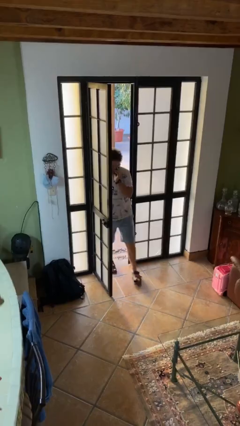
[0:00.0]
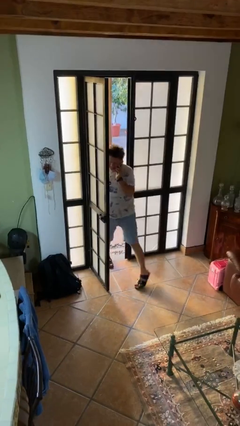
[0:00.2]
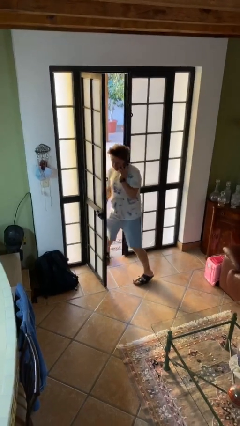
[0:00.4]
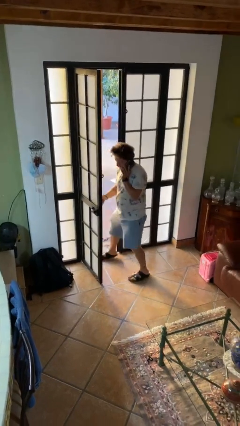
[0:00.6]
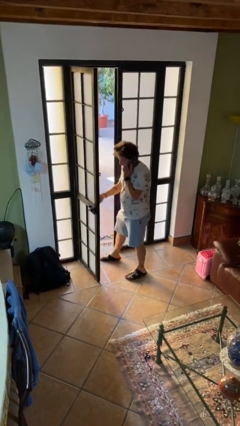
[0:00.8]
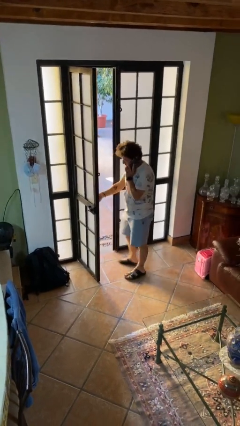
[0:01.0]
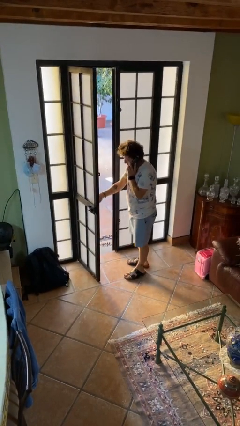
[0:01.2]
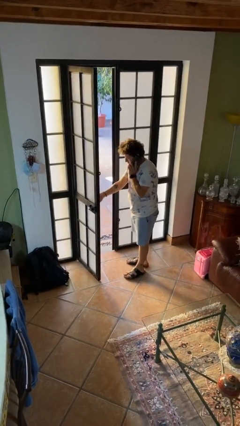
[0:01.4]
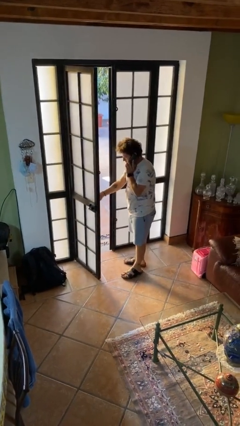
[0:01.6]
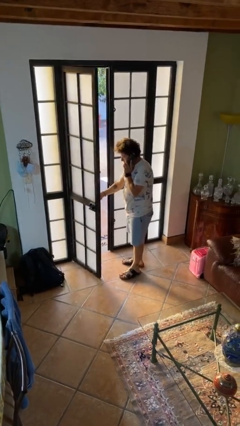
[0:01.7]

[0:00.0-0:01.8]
person enters scene through structure

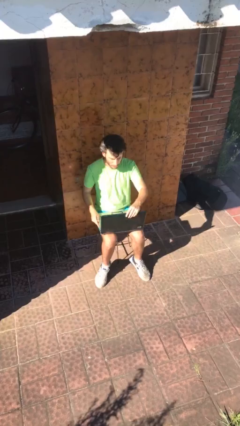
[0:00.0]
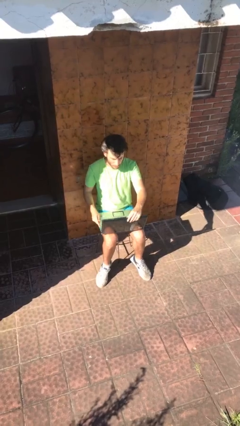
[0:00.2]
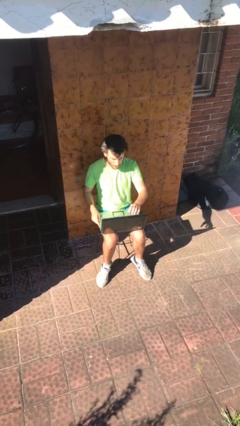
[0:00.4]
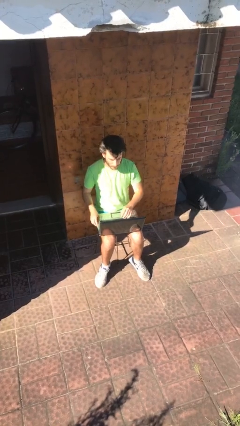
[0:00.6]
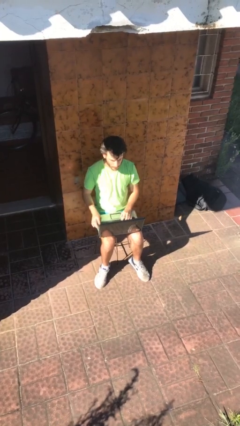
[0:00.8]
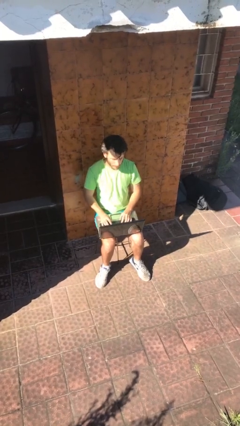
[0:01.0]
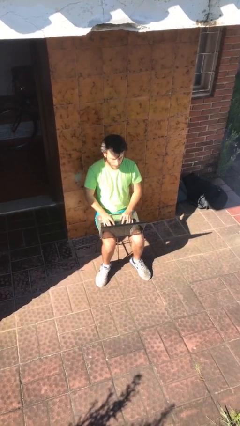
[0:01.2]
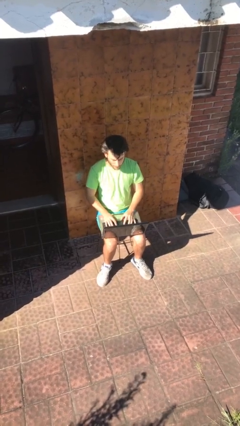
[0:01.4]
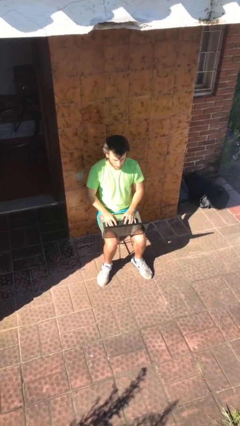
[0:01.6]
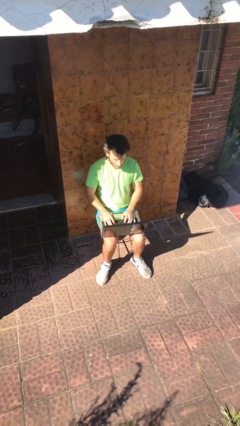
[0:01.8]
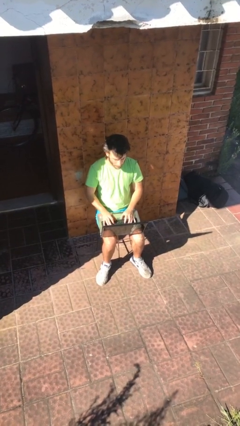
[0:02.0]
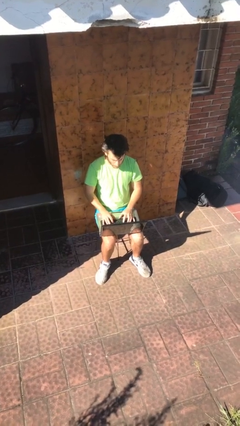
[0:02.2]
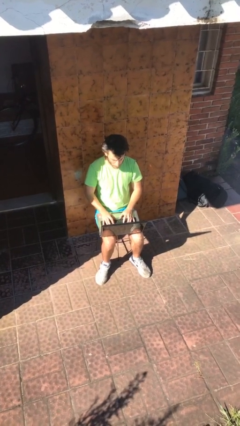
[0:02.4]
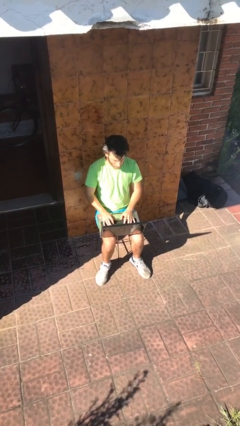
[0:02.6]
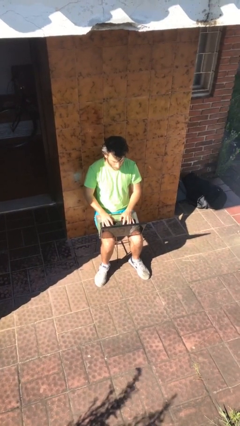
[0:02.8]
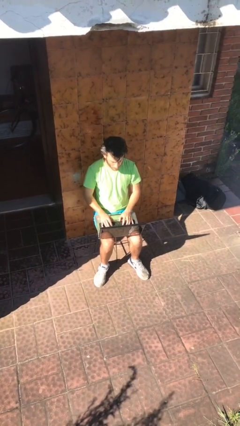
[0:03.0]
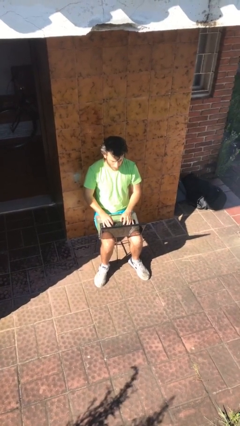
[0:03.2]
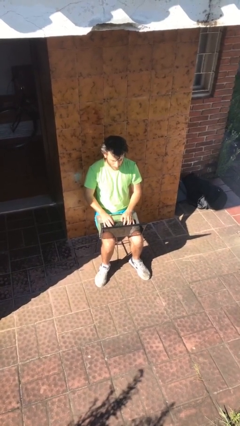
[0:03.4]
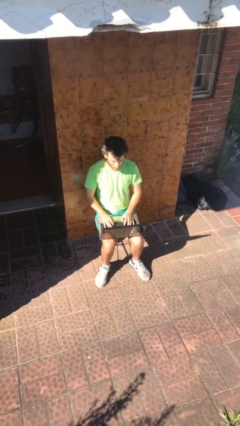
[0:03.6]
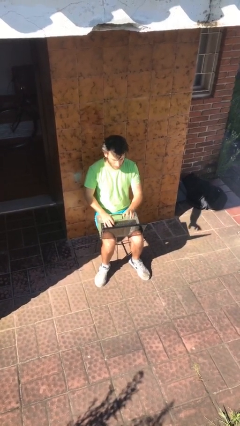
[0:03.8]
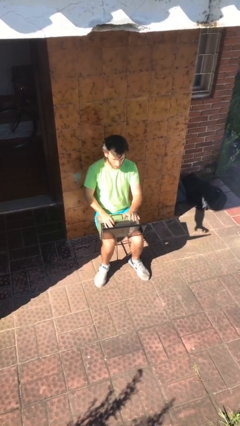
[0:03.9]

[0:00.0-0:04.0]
person interacts with laptop

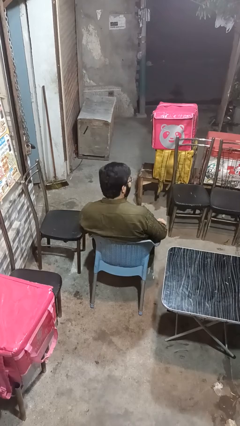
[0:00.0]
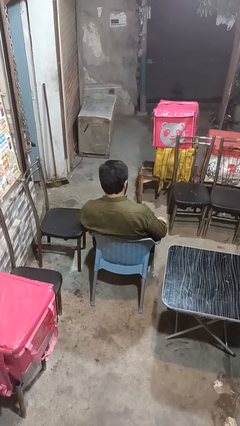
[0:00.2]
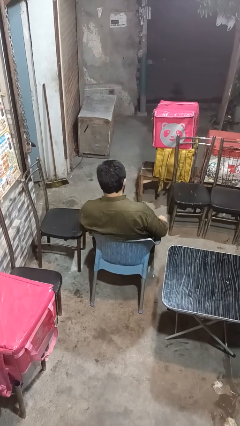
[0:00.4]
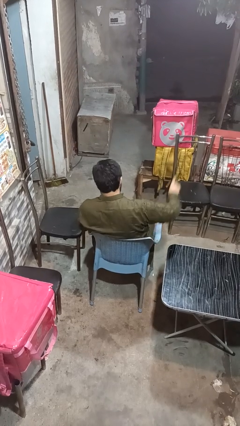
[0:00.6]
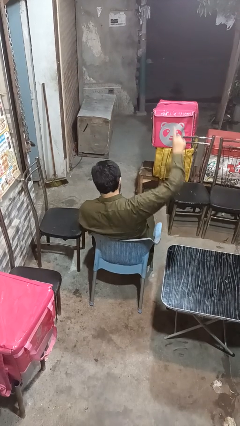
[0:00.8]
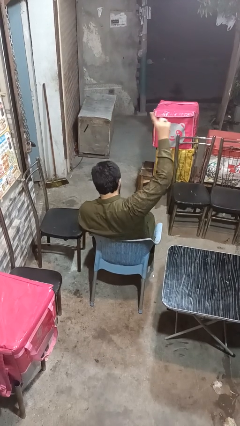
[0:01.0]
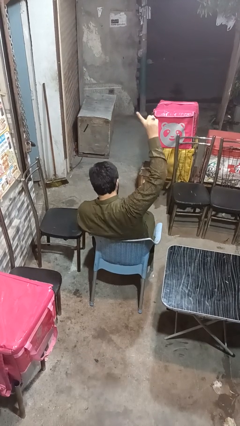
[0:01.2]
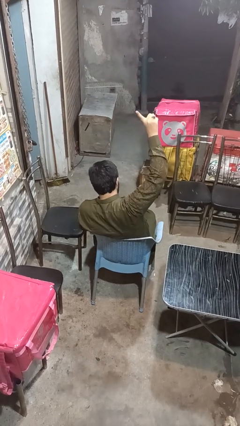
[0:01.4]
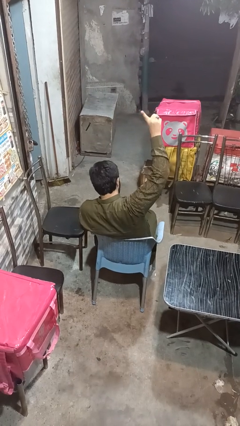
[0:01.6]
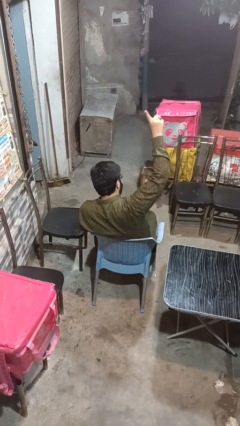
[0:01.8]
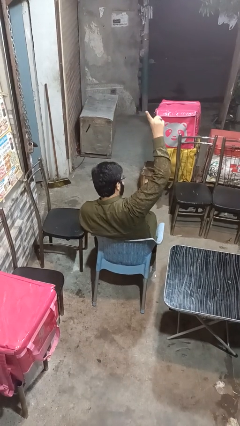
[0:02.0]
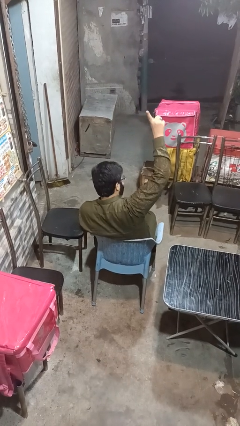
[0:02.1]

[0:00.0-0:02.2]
person gestures number one

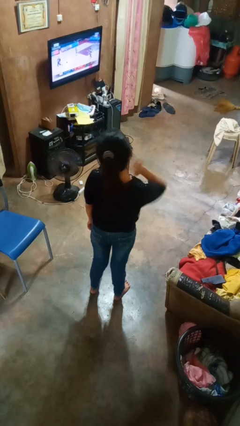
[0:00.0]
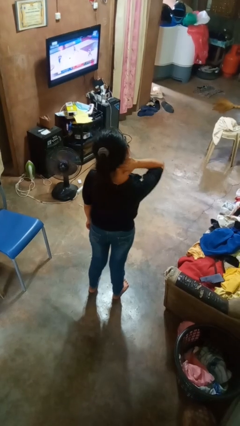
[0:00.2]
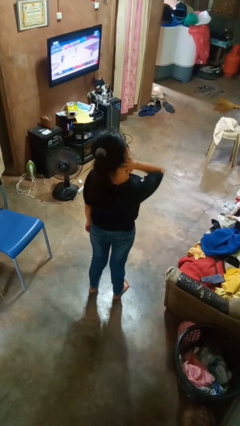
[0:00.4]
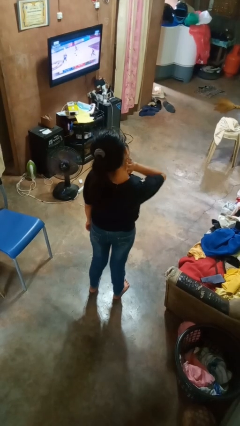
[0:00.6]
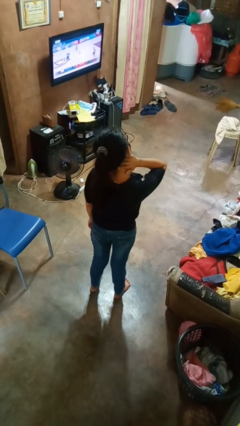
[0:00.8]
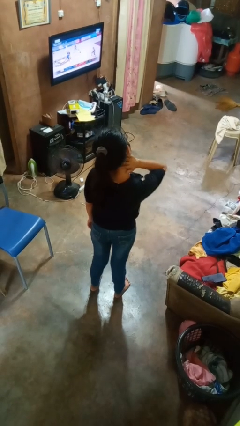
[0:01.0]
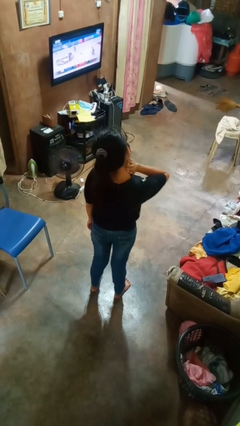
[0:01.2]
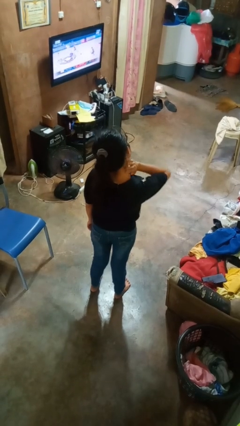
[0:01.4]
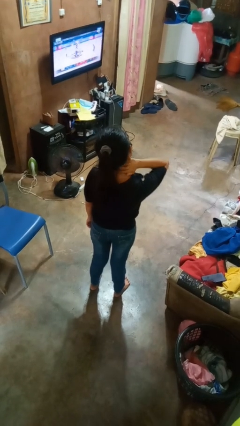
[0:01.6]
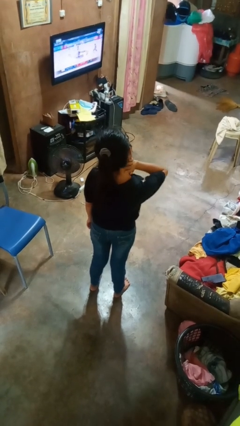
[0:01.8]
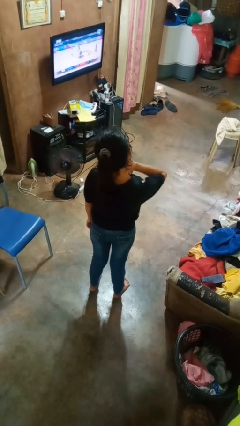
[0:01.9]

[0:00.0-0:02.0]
person rubs neck

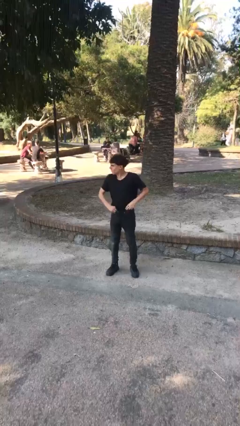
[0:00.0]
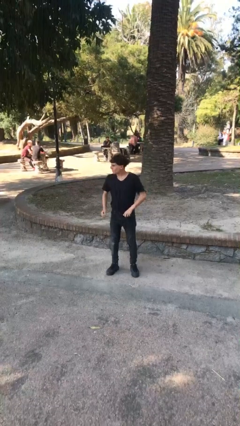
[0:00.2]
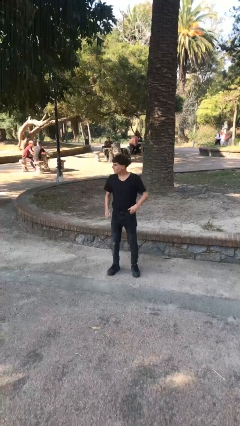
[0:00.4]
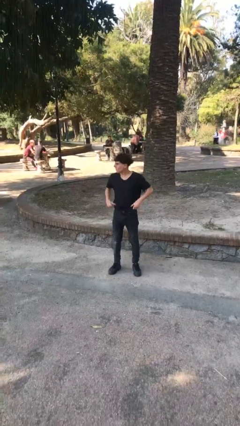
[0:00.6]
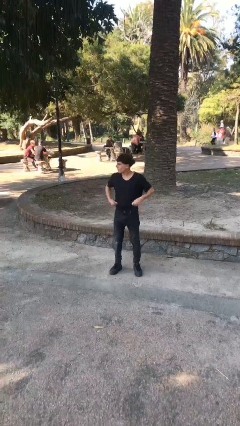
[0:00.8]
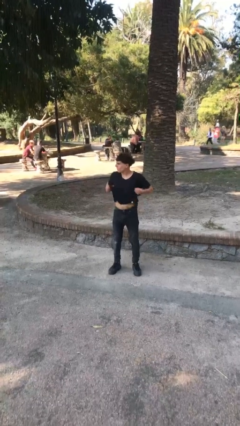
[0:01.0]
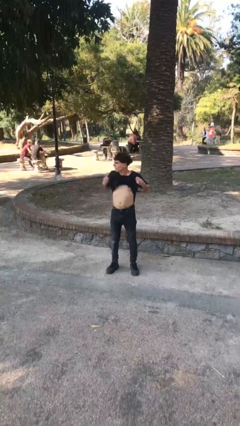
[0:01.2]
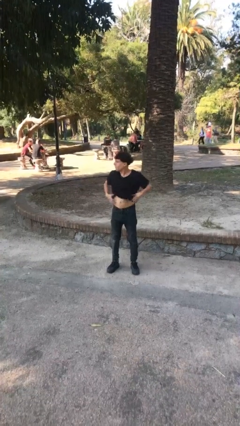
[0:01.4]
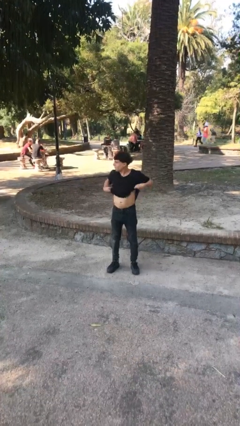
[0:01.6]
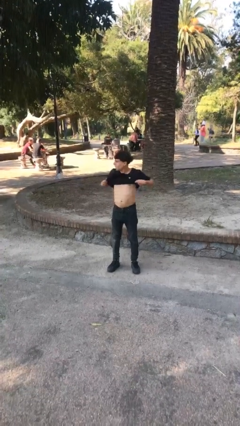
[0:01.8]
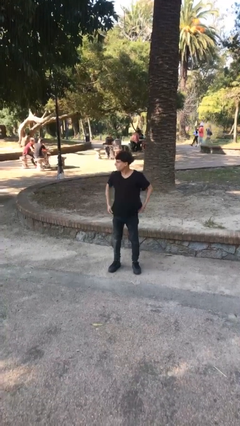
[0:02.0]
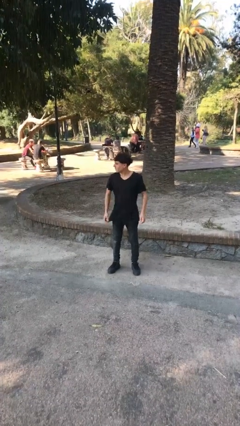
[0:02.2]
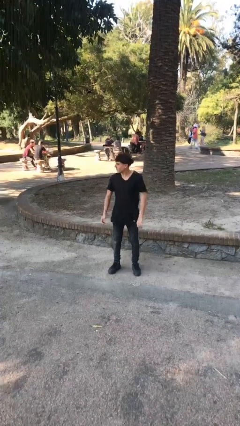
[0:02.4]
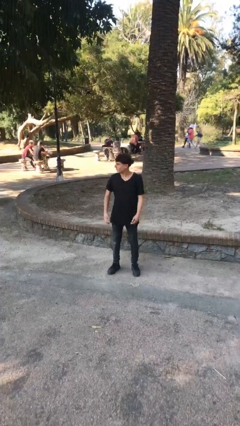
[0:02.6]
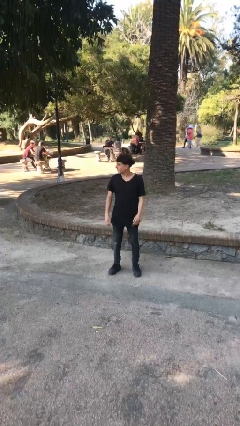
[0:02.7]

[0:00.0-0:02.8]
person untucks shirt

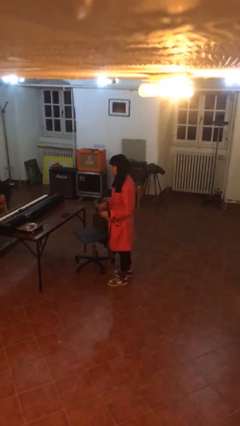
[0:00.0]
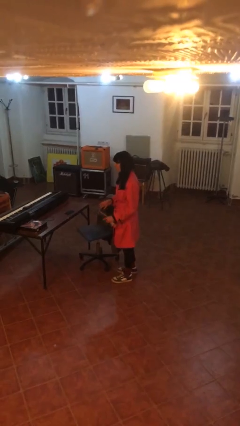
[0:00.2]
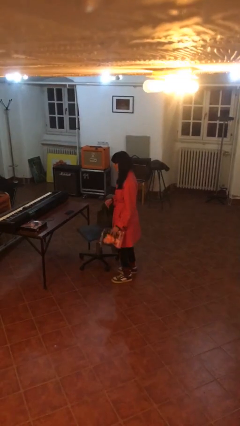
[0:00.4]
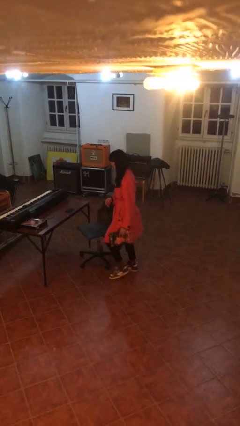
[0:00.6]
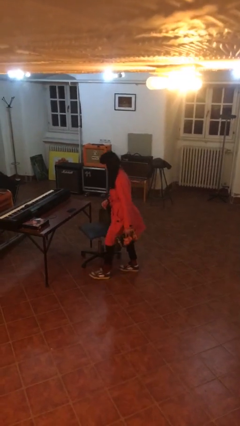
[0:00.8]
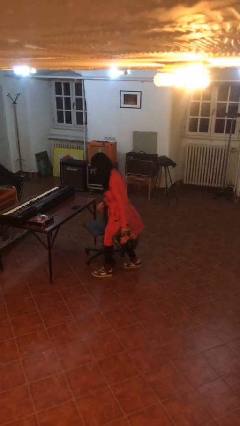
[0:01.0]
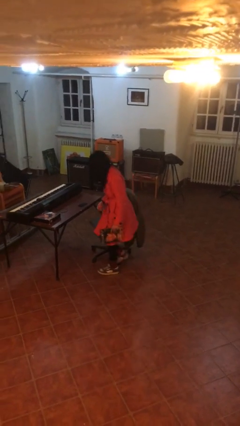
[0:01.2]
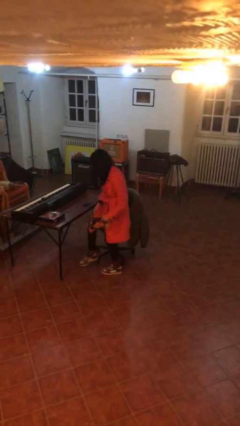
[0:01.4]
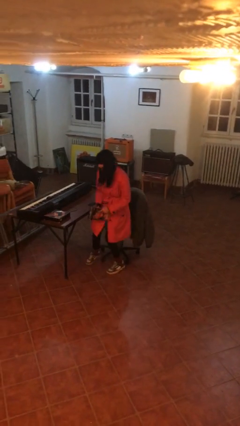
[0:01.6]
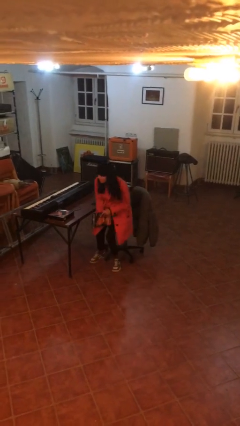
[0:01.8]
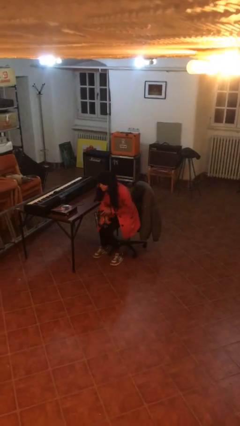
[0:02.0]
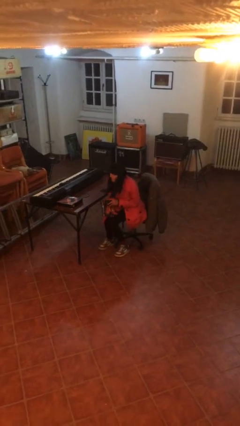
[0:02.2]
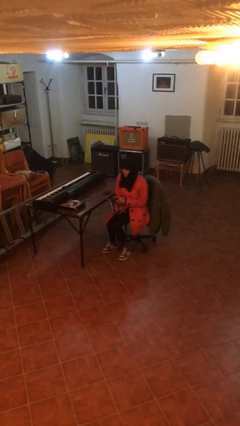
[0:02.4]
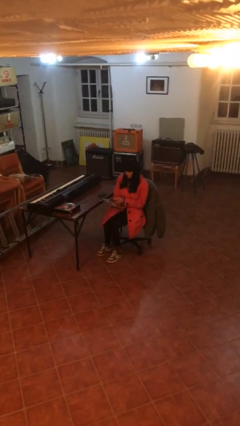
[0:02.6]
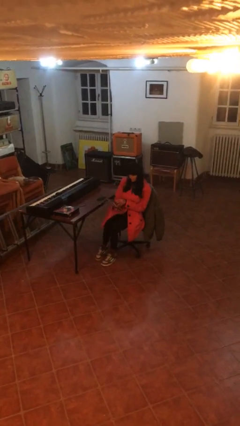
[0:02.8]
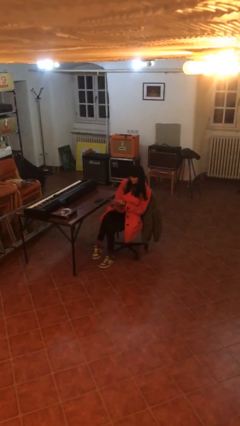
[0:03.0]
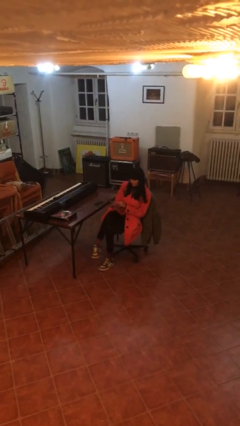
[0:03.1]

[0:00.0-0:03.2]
person sits down

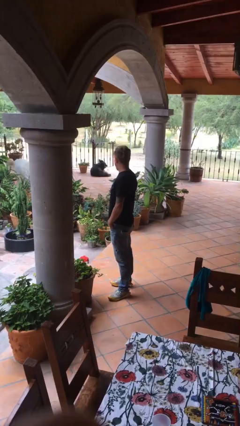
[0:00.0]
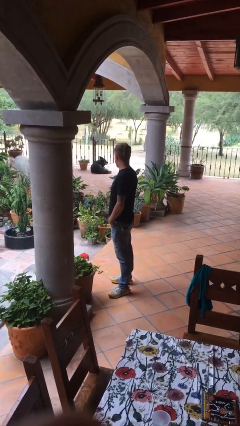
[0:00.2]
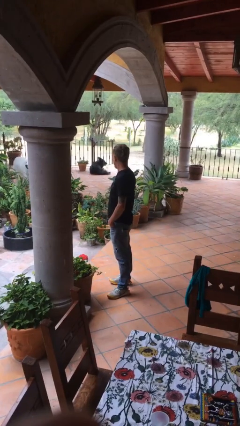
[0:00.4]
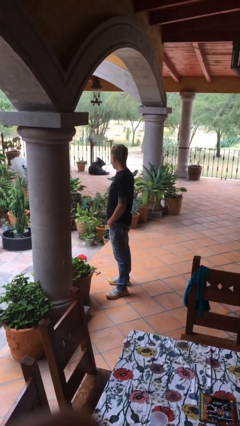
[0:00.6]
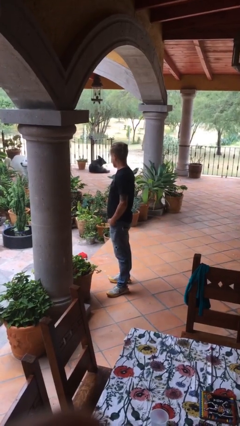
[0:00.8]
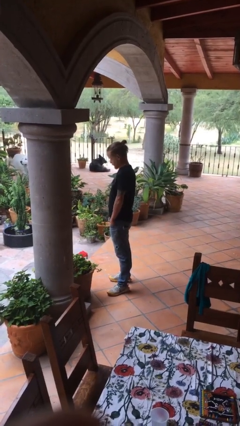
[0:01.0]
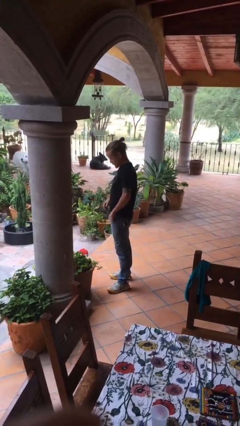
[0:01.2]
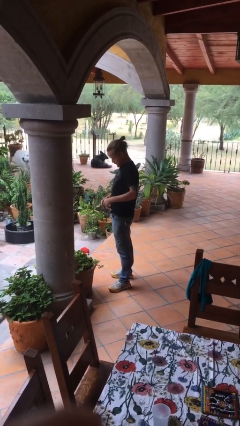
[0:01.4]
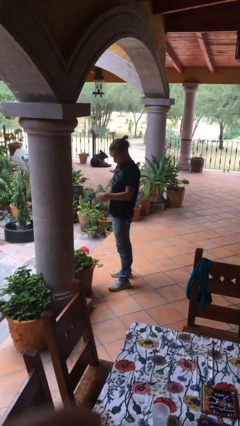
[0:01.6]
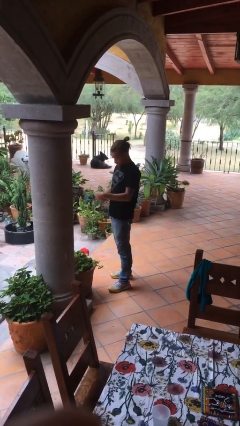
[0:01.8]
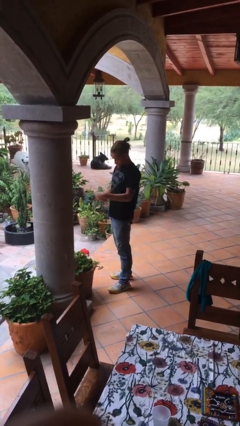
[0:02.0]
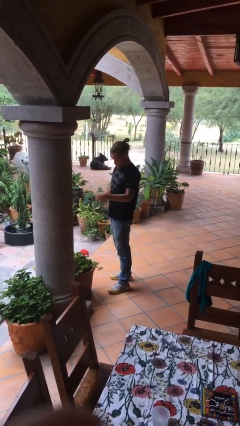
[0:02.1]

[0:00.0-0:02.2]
person takes phone from pocket
